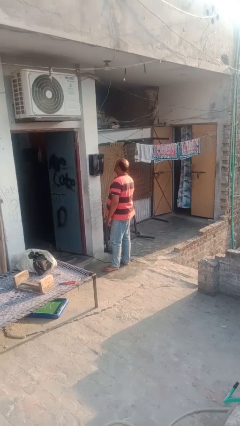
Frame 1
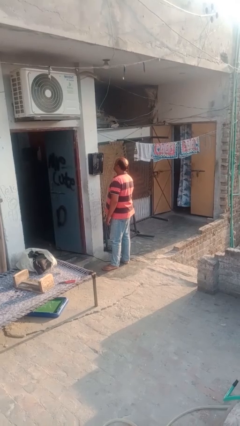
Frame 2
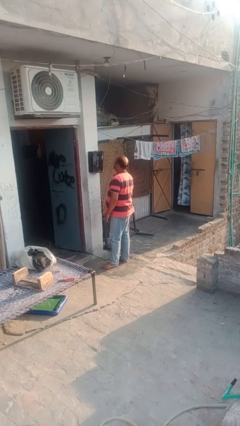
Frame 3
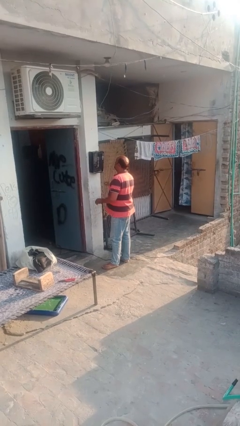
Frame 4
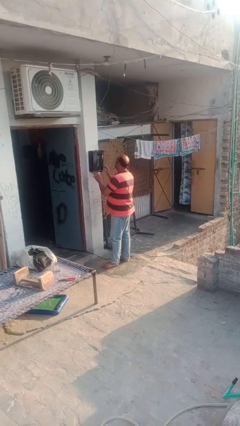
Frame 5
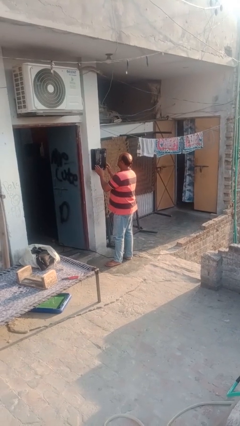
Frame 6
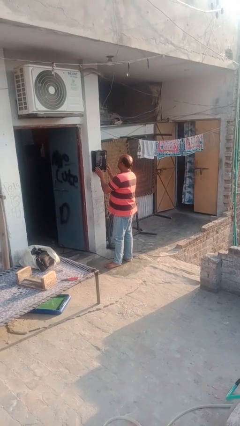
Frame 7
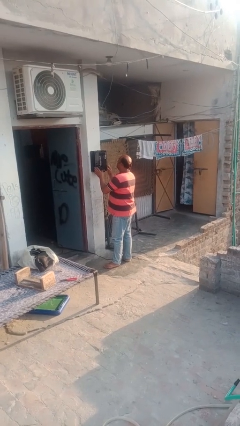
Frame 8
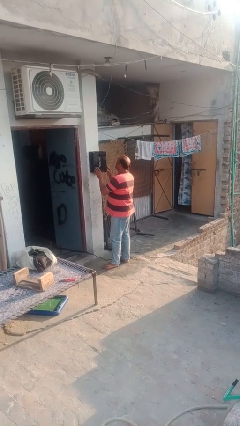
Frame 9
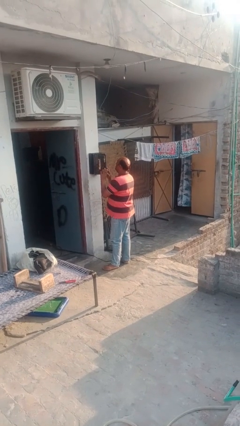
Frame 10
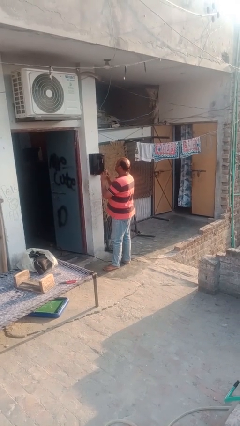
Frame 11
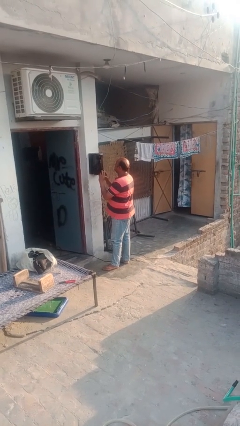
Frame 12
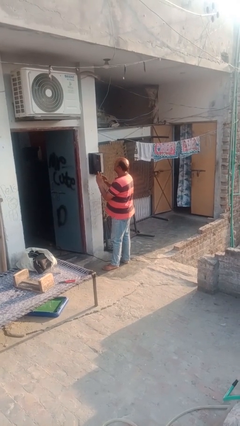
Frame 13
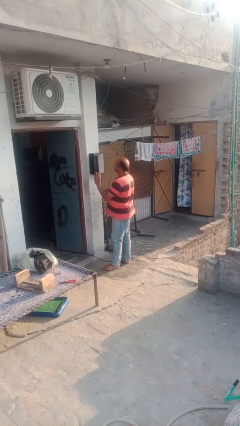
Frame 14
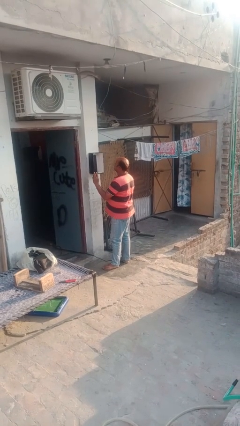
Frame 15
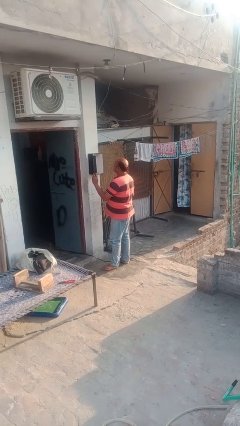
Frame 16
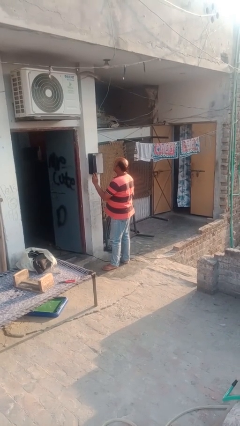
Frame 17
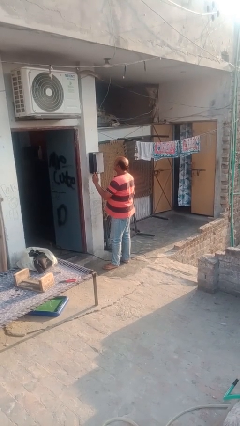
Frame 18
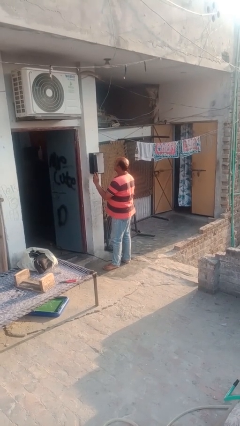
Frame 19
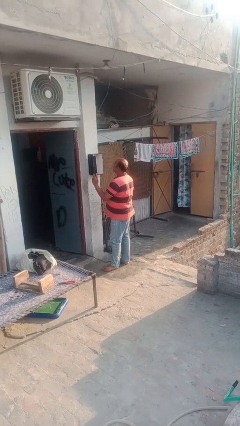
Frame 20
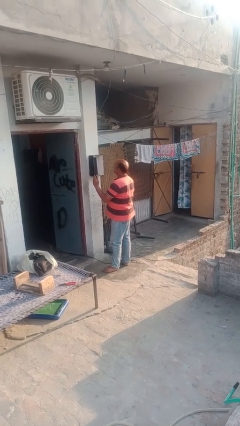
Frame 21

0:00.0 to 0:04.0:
person opens mailbox

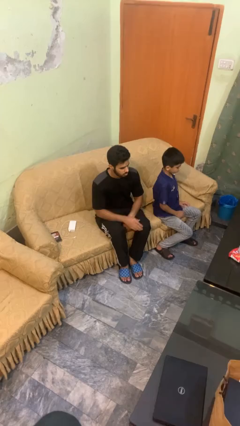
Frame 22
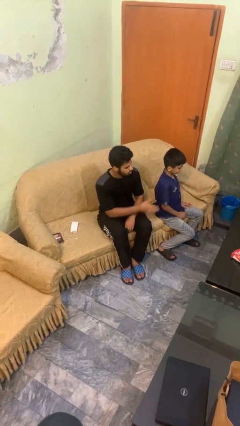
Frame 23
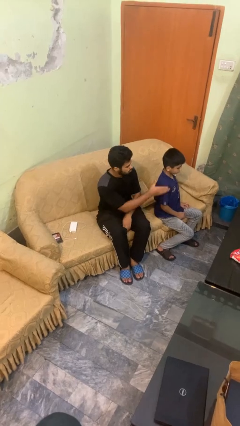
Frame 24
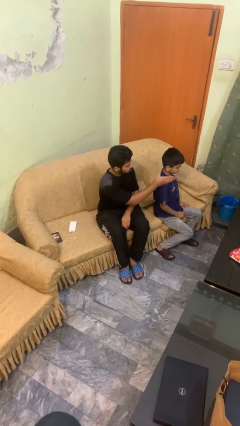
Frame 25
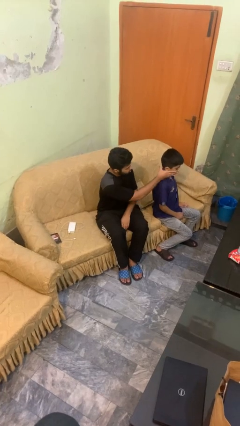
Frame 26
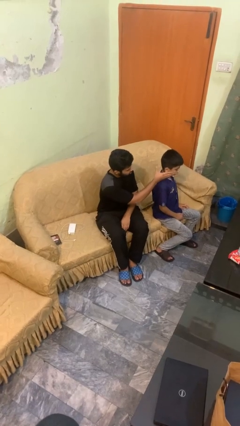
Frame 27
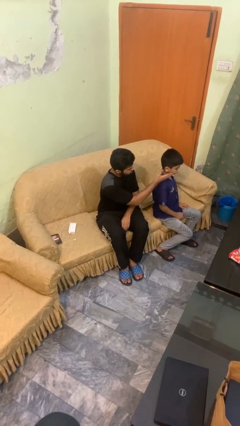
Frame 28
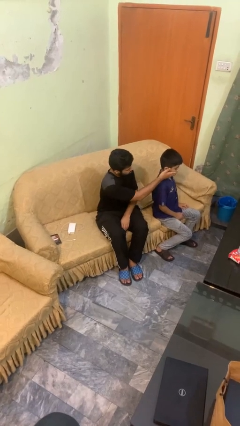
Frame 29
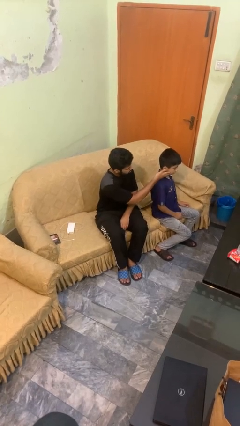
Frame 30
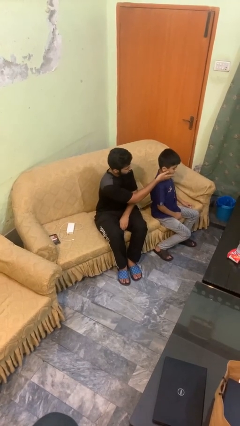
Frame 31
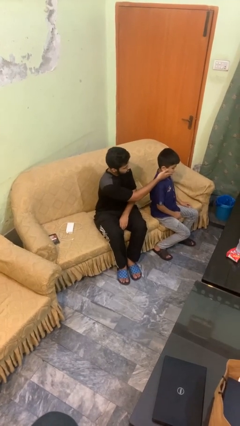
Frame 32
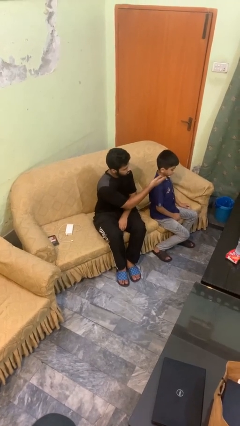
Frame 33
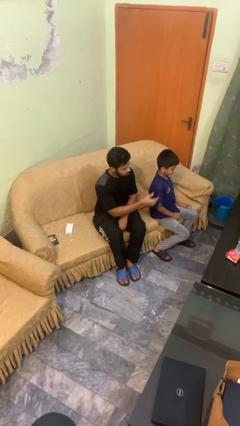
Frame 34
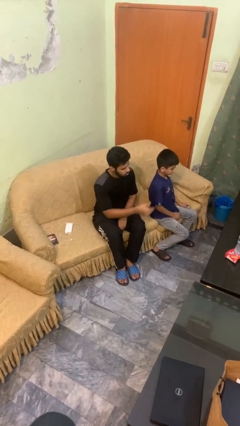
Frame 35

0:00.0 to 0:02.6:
person touches face of person

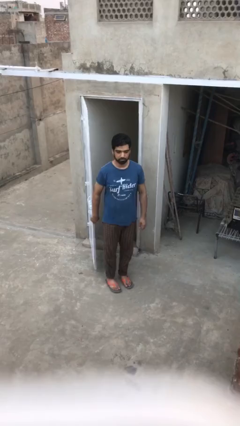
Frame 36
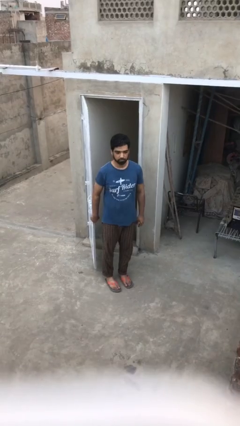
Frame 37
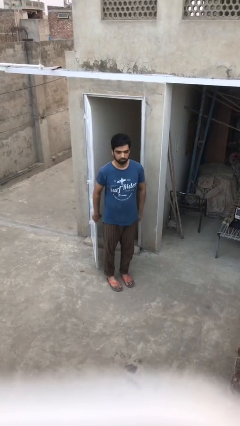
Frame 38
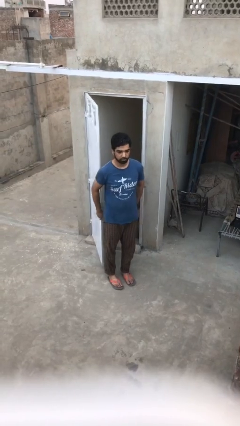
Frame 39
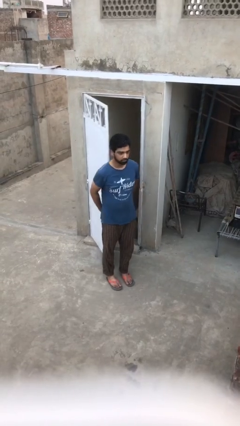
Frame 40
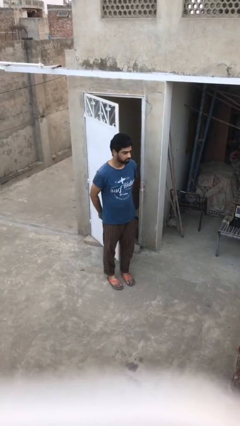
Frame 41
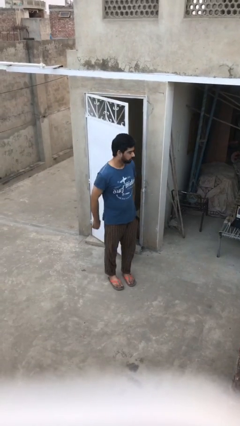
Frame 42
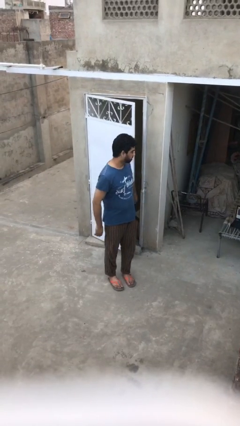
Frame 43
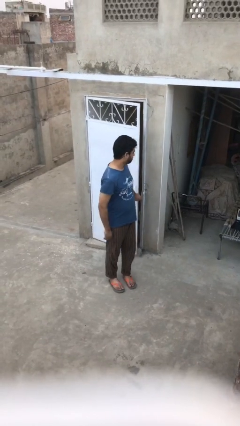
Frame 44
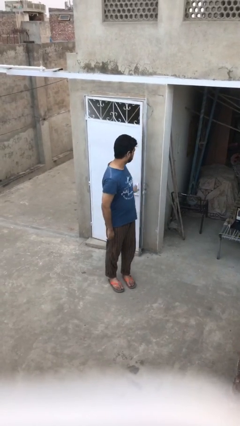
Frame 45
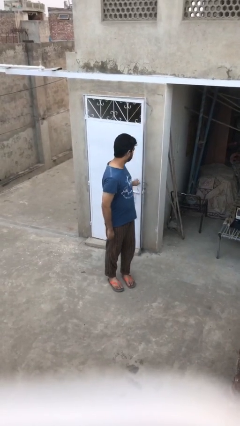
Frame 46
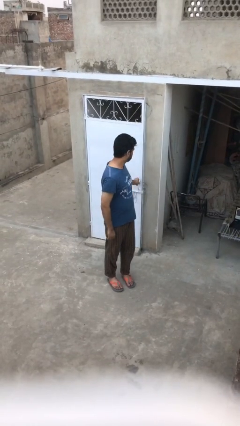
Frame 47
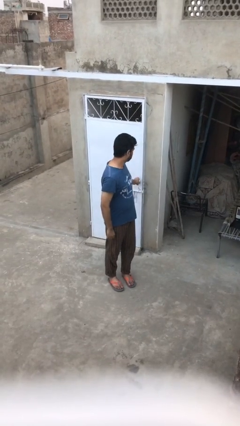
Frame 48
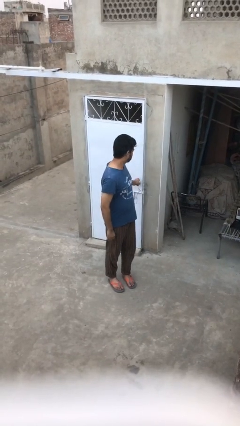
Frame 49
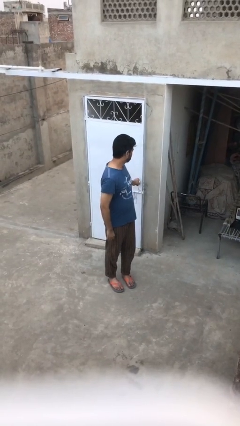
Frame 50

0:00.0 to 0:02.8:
person closes facility door

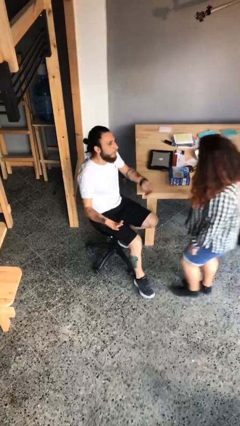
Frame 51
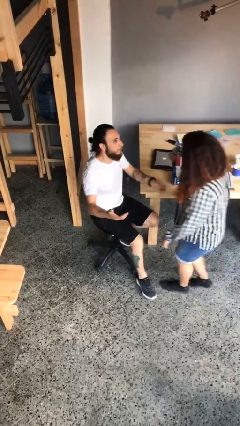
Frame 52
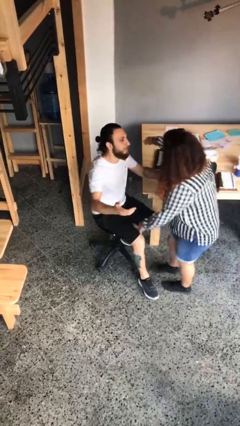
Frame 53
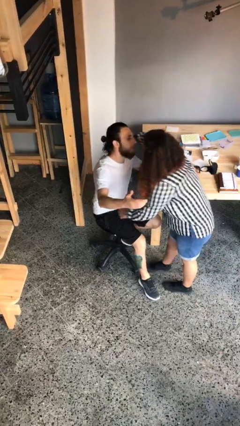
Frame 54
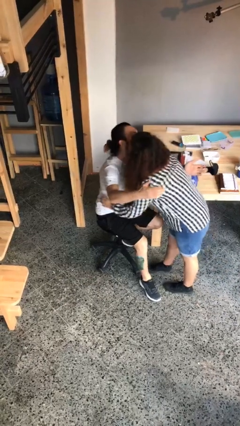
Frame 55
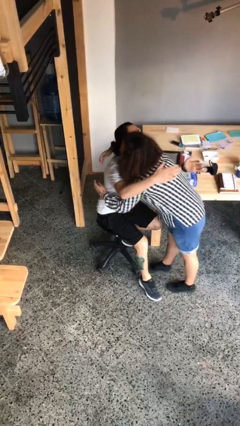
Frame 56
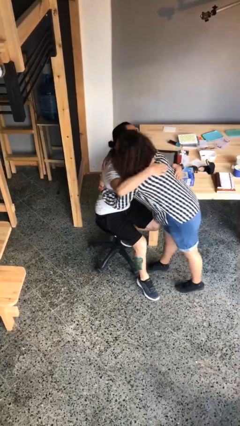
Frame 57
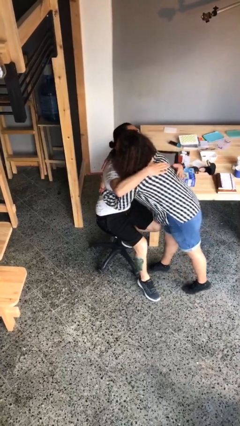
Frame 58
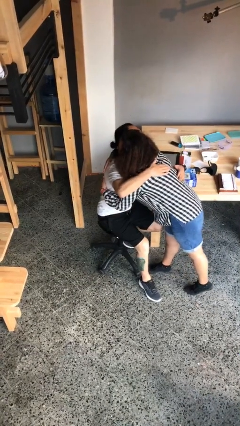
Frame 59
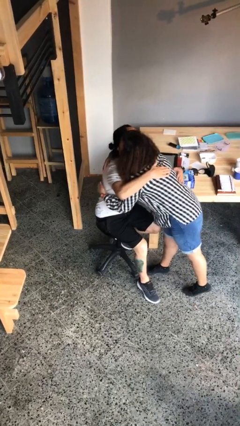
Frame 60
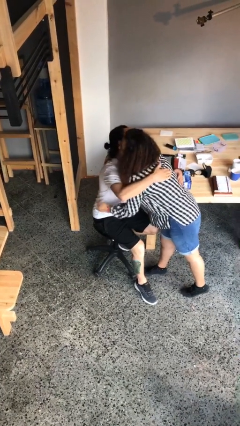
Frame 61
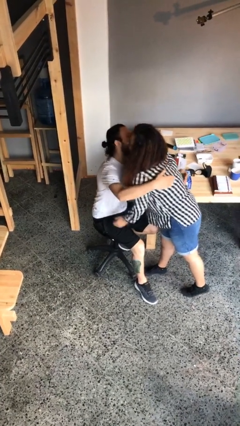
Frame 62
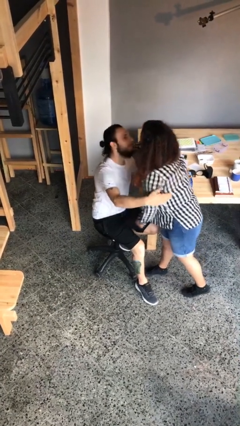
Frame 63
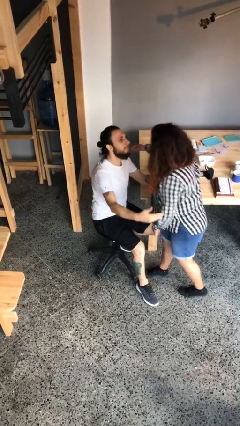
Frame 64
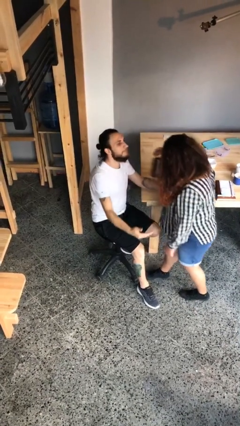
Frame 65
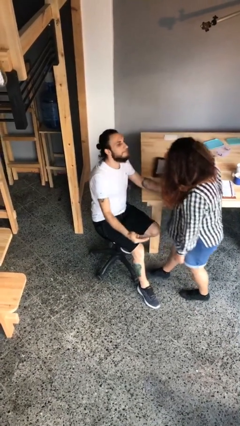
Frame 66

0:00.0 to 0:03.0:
person embraces person

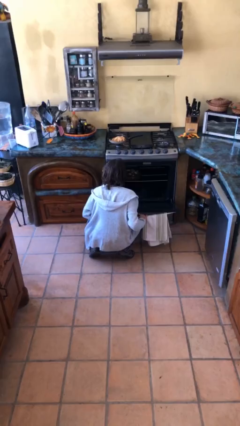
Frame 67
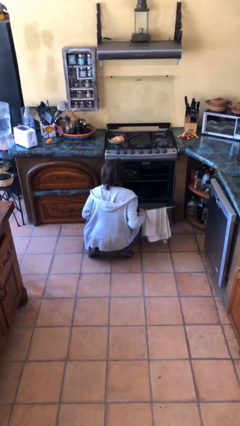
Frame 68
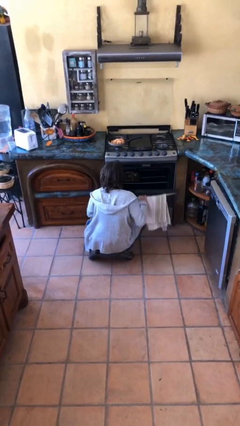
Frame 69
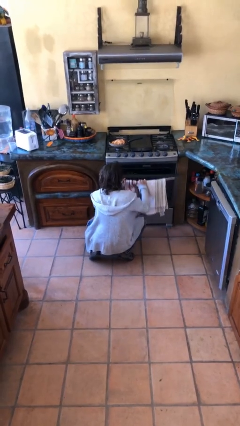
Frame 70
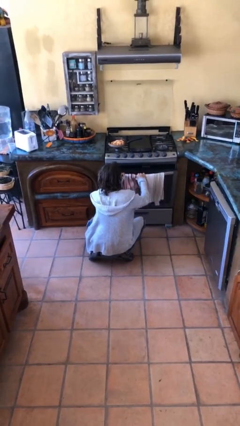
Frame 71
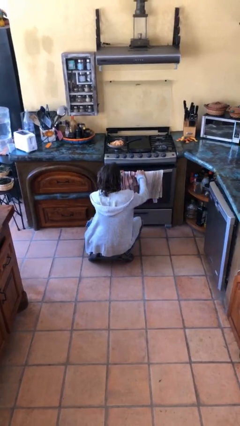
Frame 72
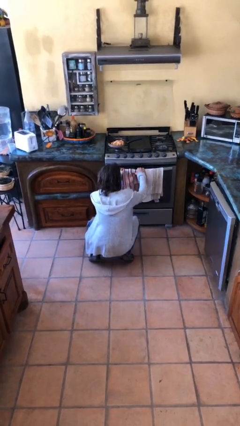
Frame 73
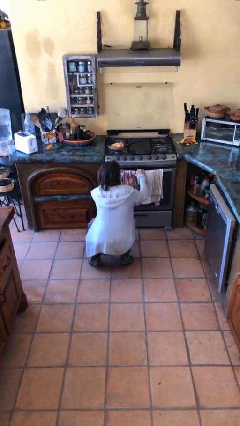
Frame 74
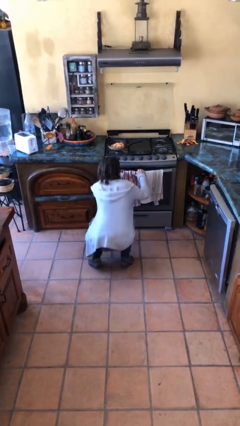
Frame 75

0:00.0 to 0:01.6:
person closes oven door

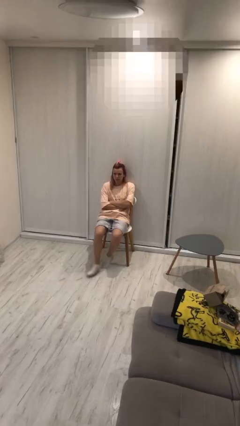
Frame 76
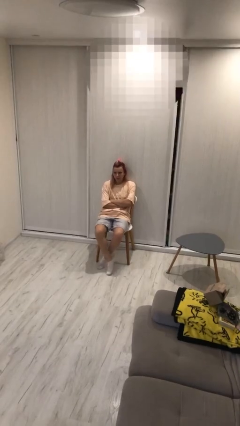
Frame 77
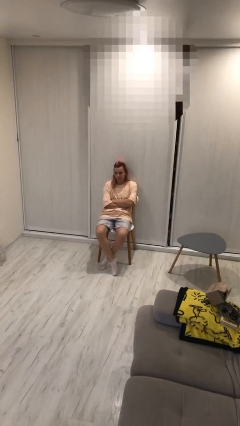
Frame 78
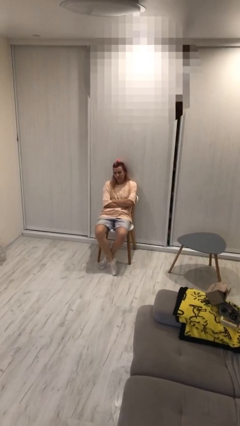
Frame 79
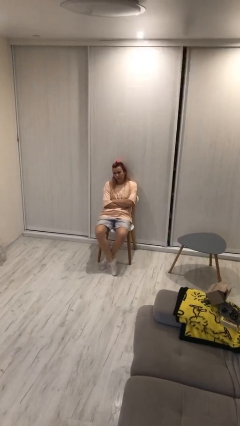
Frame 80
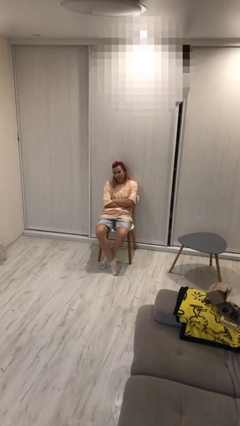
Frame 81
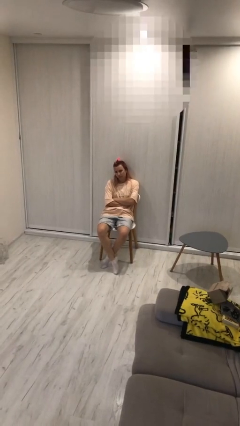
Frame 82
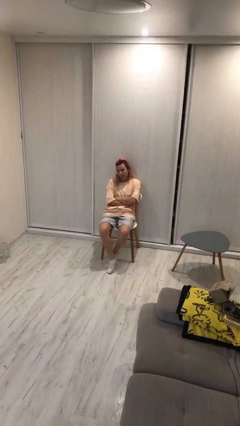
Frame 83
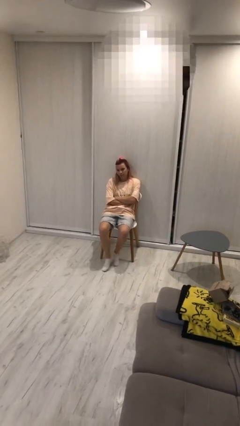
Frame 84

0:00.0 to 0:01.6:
person crosses legs

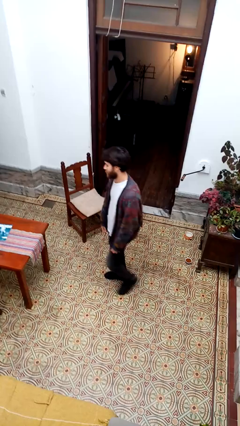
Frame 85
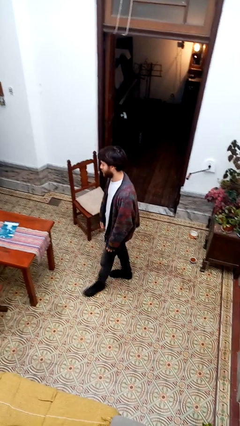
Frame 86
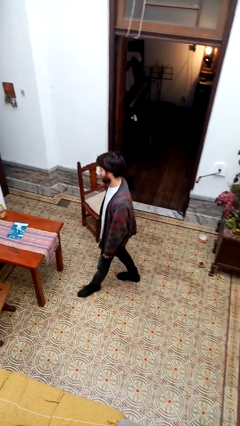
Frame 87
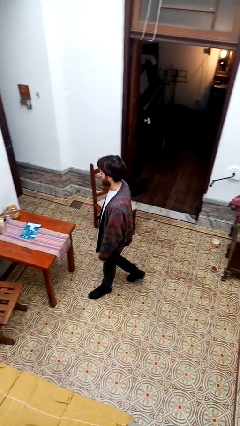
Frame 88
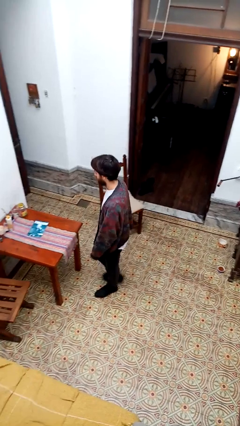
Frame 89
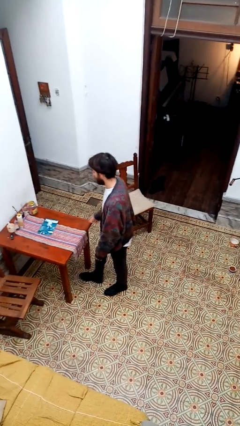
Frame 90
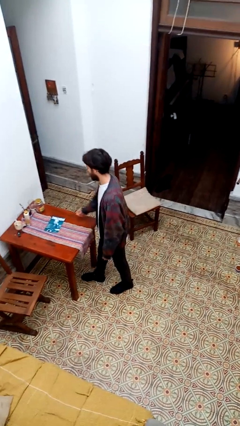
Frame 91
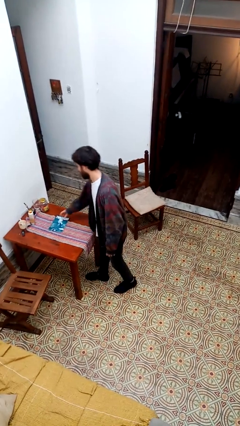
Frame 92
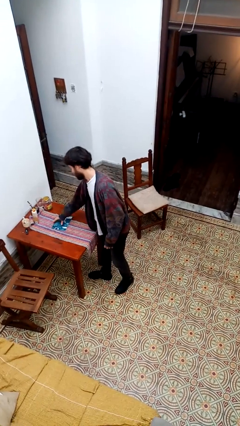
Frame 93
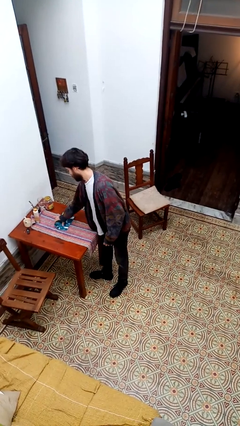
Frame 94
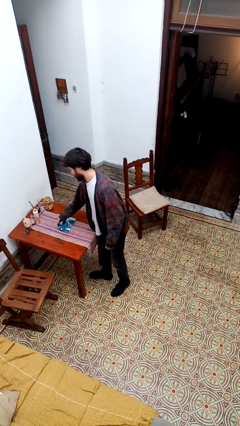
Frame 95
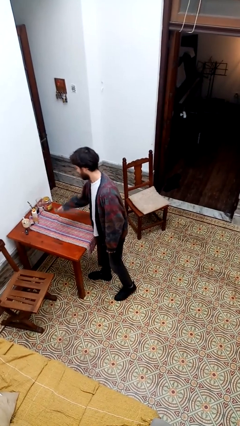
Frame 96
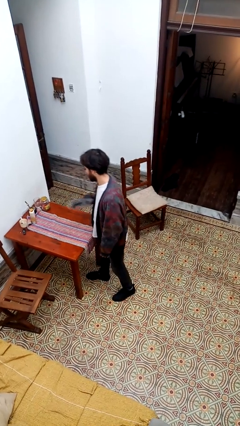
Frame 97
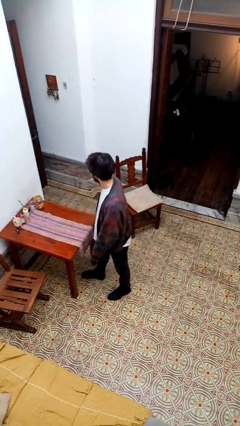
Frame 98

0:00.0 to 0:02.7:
person picks up object from table
